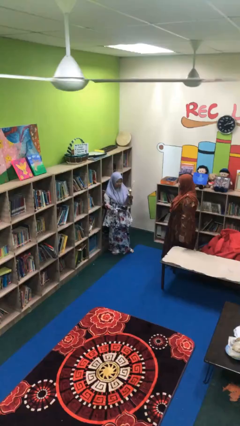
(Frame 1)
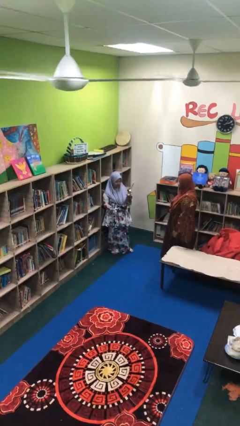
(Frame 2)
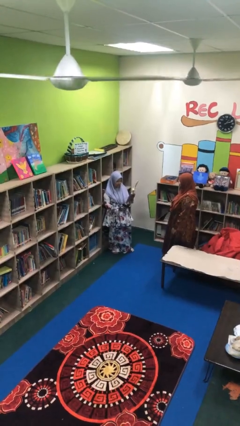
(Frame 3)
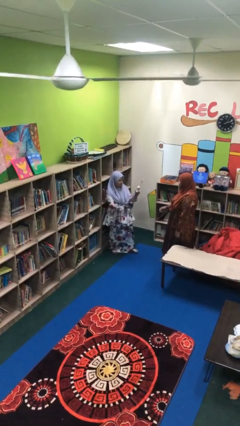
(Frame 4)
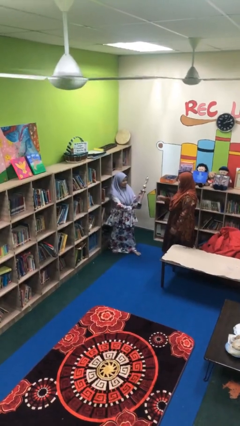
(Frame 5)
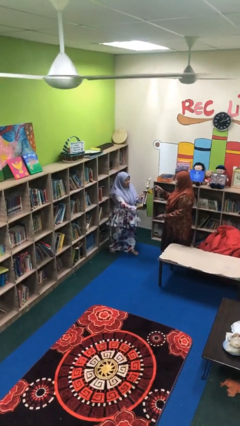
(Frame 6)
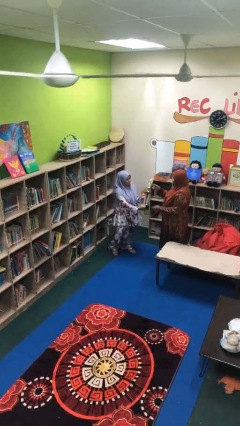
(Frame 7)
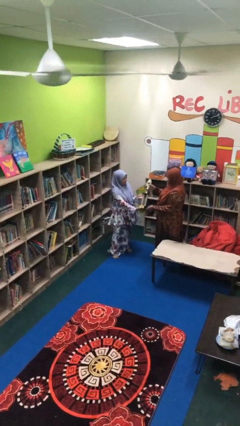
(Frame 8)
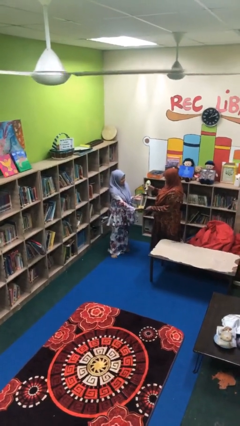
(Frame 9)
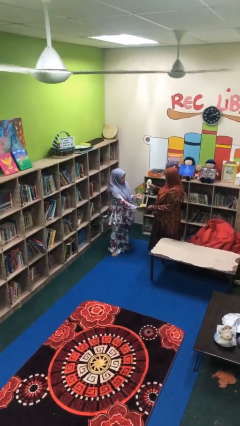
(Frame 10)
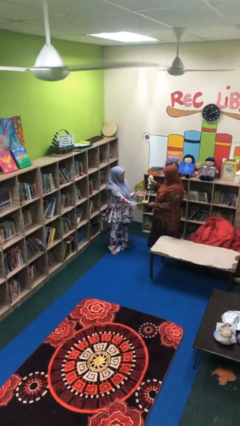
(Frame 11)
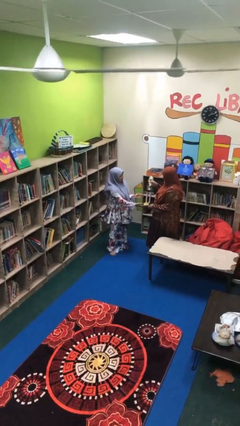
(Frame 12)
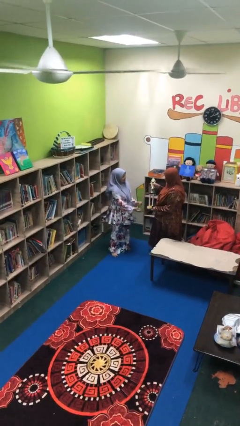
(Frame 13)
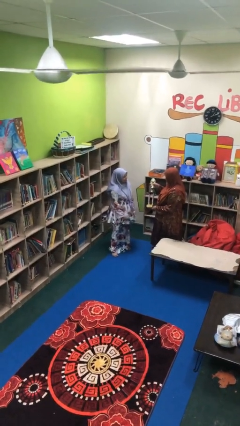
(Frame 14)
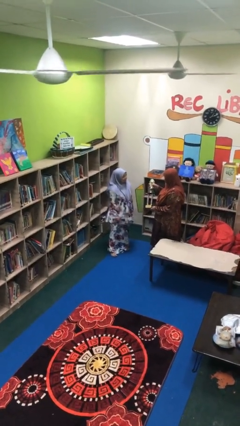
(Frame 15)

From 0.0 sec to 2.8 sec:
person transfers object to person

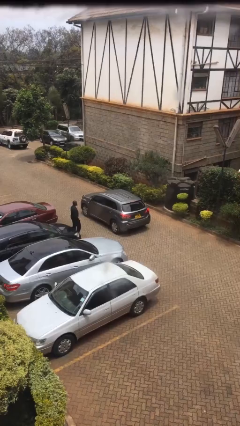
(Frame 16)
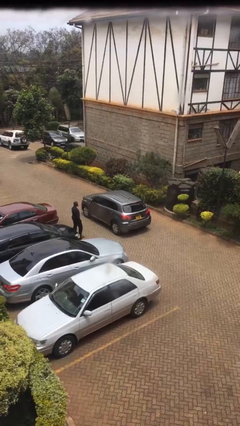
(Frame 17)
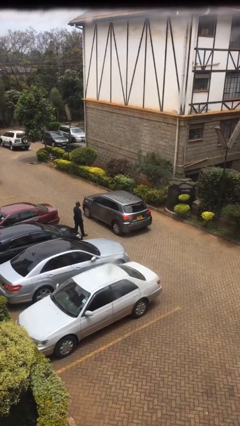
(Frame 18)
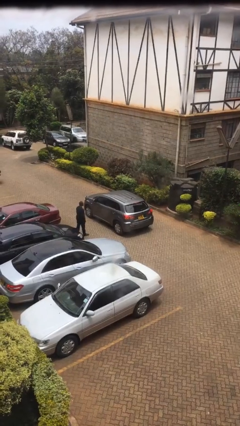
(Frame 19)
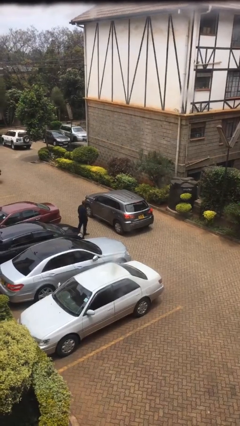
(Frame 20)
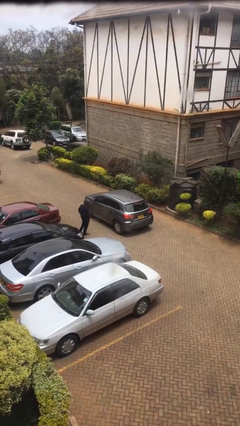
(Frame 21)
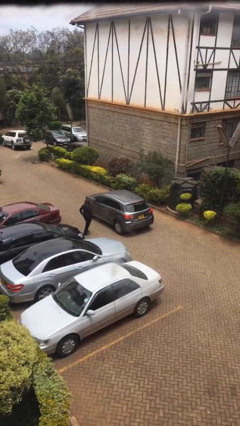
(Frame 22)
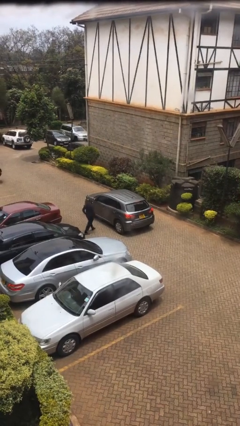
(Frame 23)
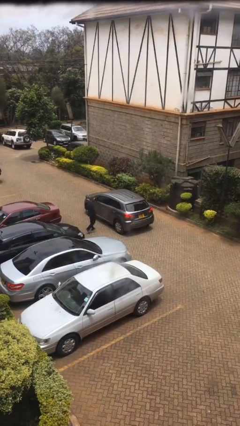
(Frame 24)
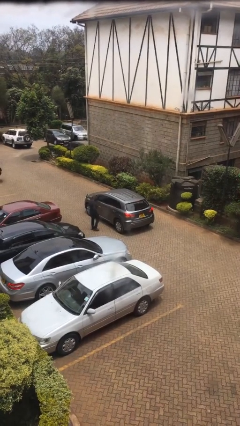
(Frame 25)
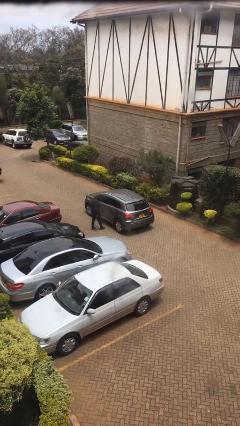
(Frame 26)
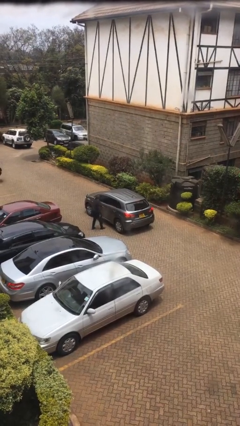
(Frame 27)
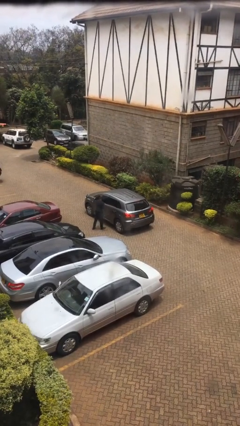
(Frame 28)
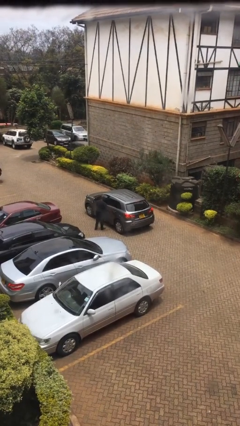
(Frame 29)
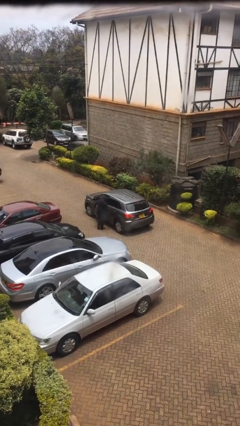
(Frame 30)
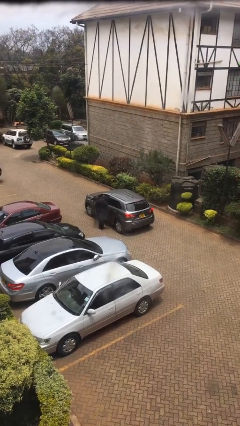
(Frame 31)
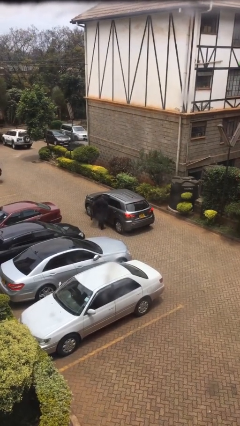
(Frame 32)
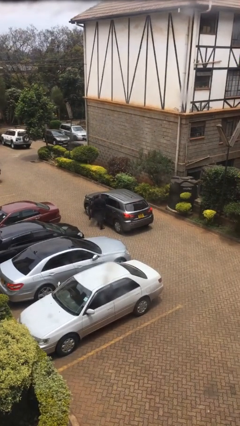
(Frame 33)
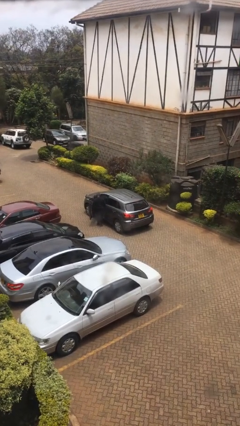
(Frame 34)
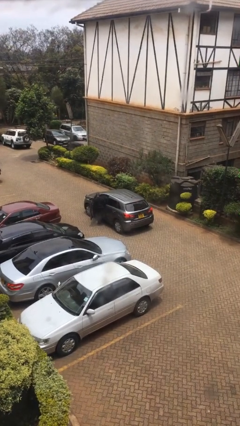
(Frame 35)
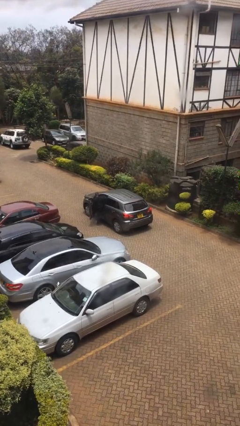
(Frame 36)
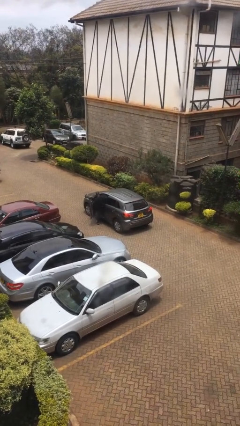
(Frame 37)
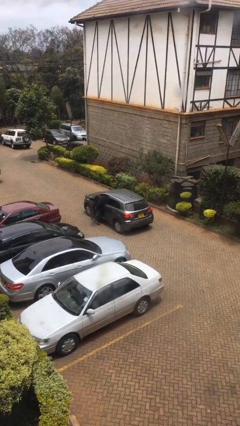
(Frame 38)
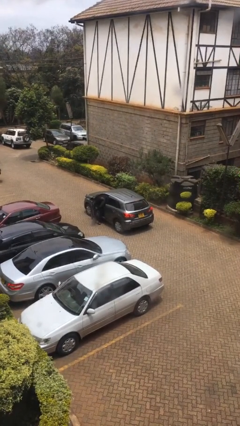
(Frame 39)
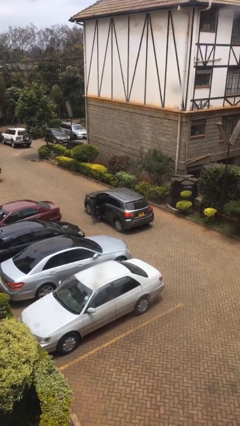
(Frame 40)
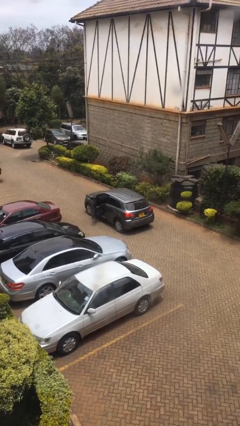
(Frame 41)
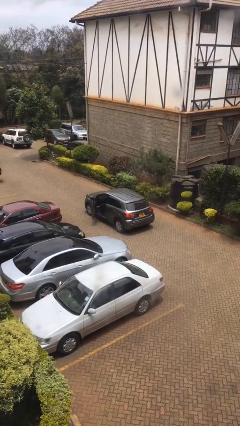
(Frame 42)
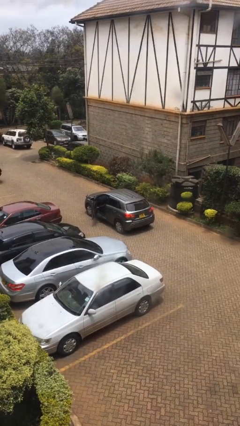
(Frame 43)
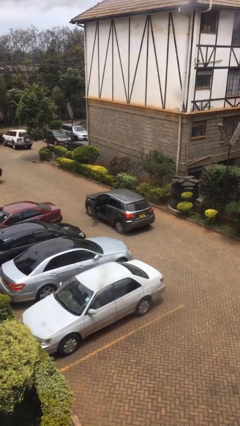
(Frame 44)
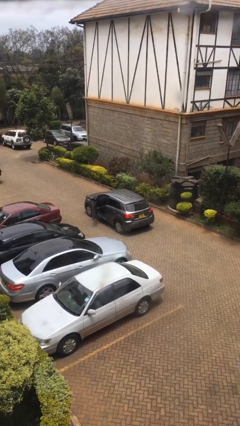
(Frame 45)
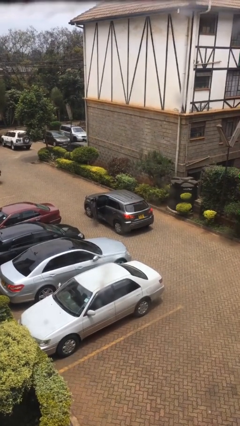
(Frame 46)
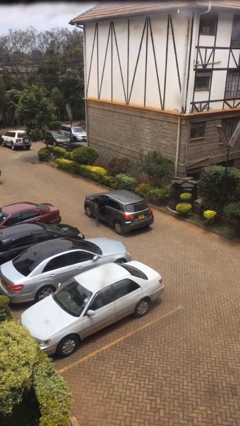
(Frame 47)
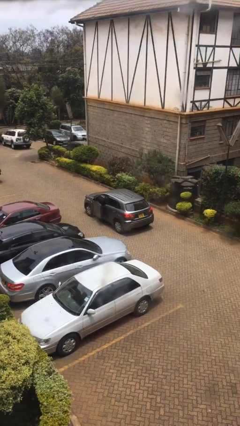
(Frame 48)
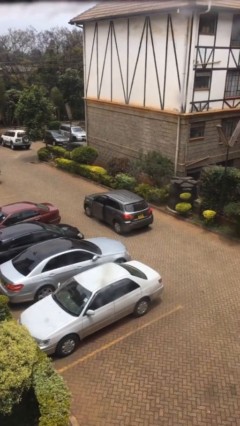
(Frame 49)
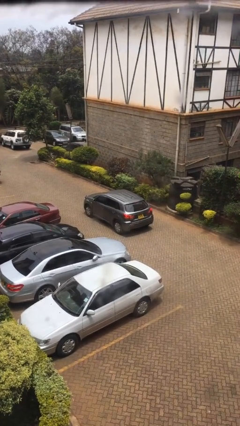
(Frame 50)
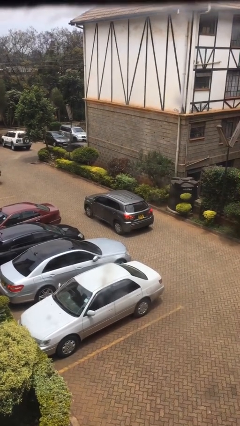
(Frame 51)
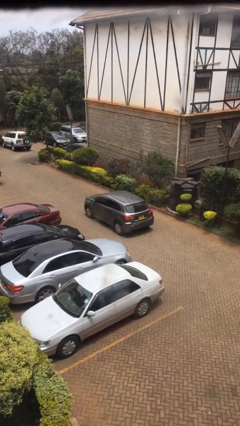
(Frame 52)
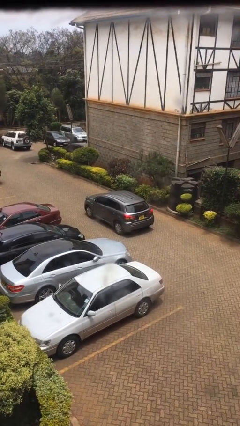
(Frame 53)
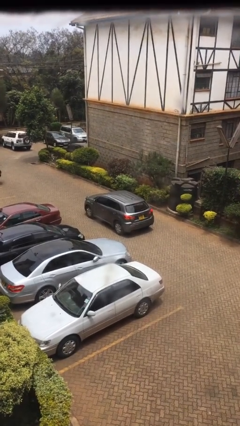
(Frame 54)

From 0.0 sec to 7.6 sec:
car picks up person

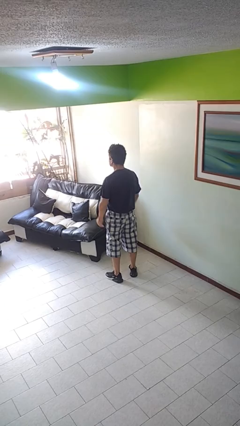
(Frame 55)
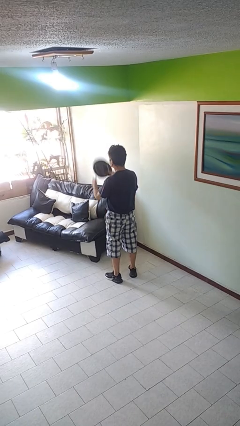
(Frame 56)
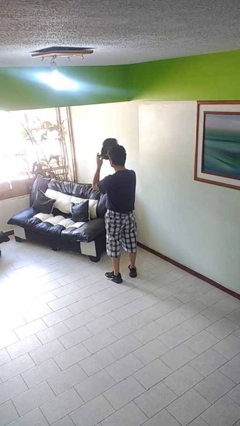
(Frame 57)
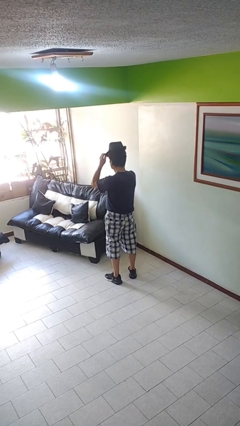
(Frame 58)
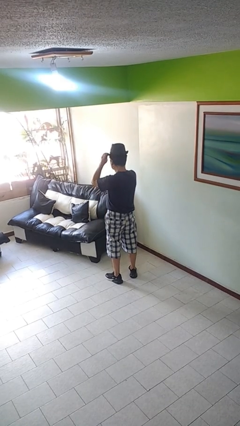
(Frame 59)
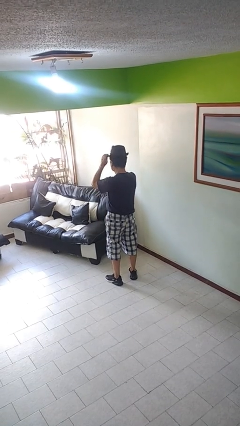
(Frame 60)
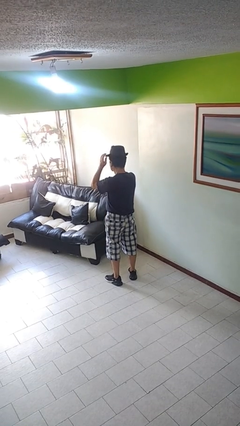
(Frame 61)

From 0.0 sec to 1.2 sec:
person puts on hat

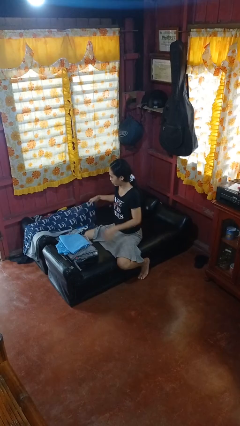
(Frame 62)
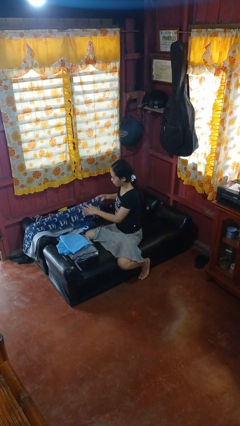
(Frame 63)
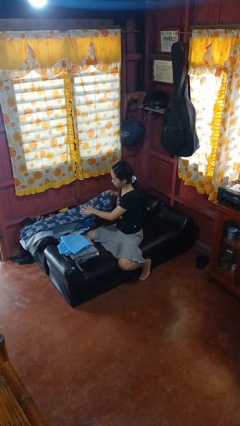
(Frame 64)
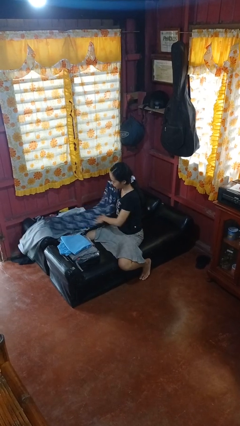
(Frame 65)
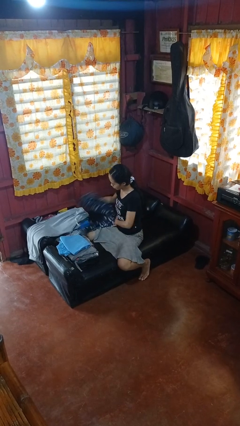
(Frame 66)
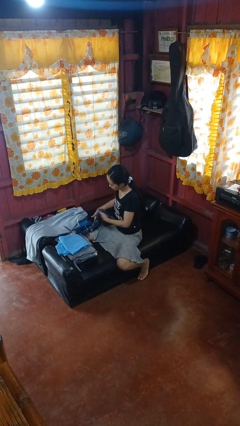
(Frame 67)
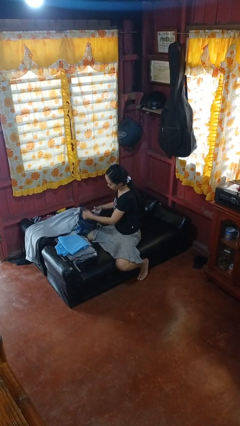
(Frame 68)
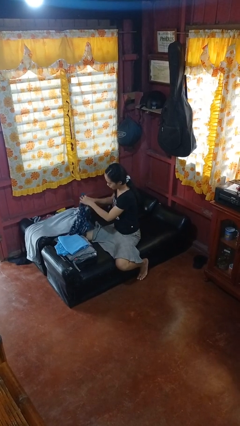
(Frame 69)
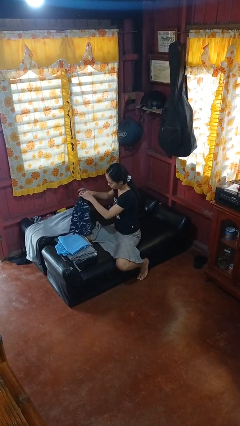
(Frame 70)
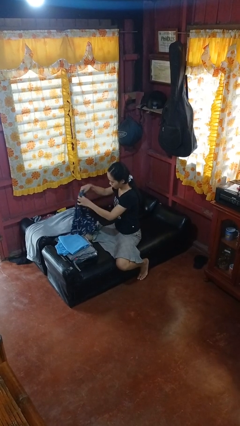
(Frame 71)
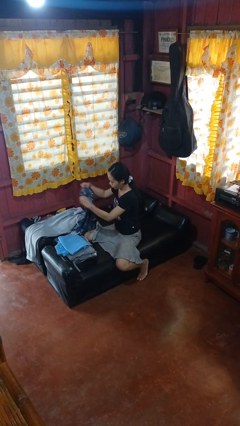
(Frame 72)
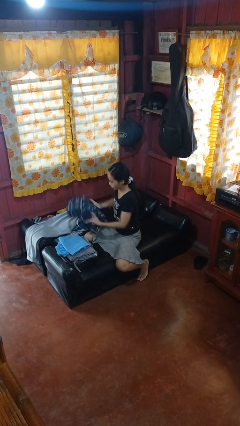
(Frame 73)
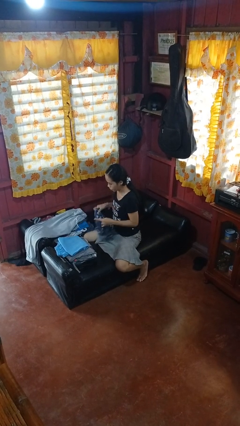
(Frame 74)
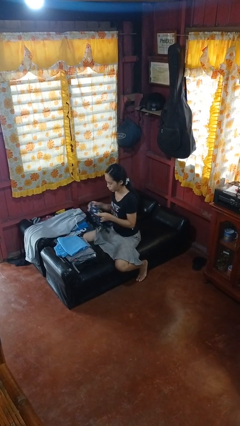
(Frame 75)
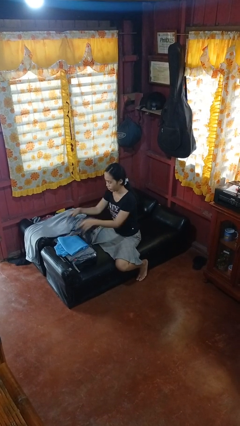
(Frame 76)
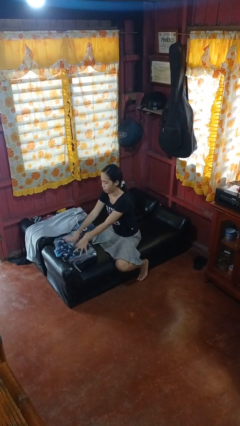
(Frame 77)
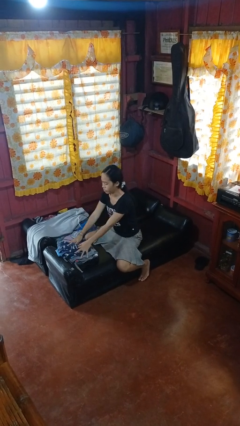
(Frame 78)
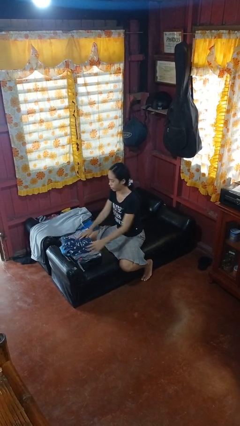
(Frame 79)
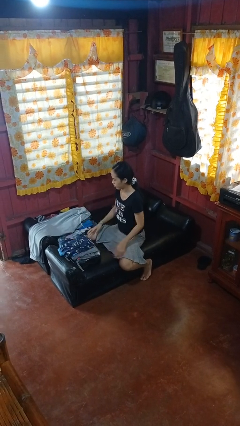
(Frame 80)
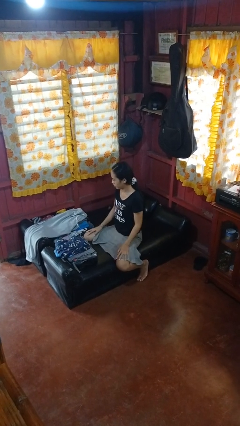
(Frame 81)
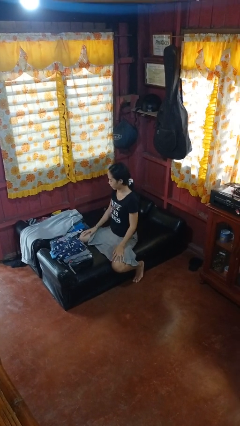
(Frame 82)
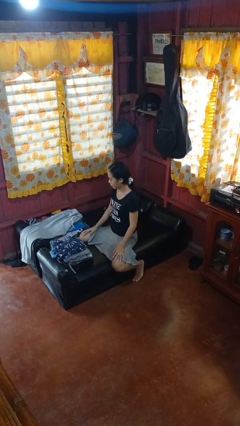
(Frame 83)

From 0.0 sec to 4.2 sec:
person folds pants

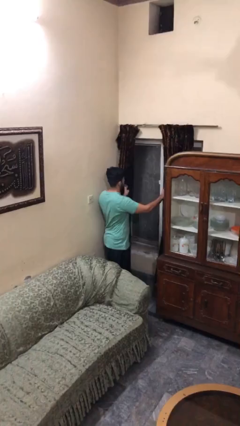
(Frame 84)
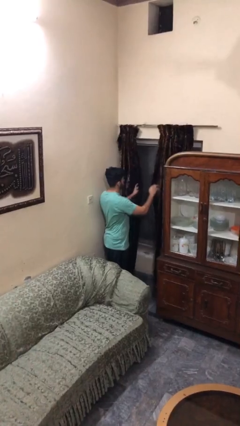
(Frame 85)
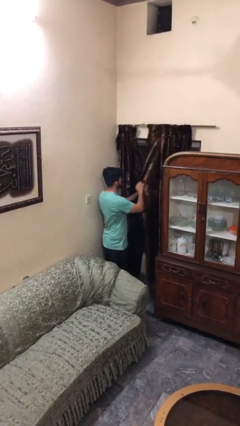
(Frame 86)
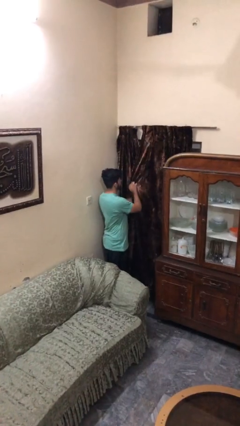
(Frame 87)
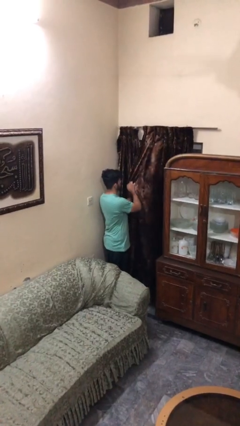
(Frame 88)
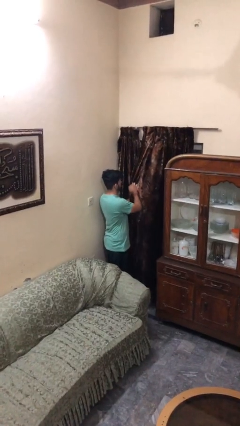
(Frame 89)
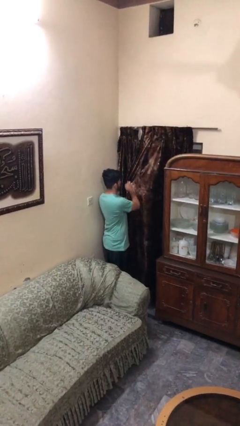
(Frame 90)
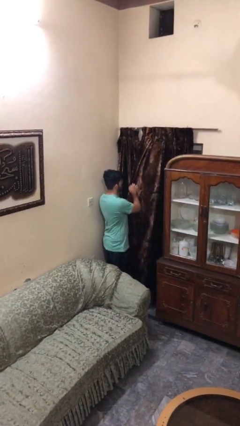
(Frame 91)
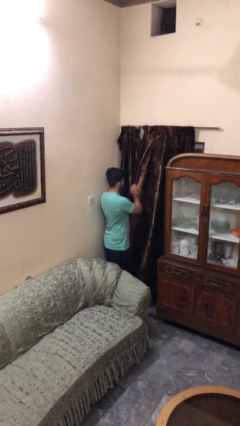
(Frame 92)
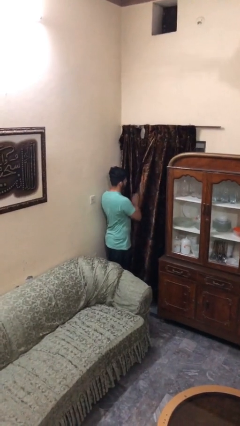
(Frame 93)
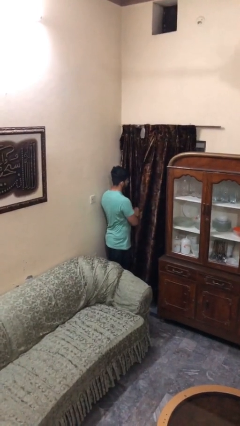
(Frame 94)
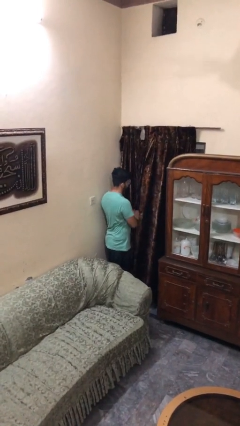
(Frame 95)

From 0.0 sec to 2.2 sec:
person closes curtains
